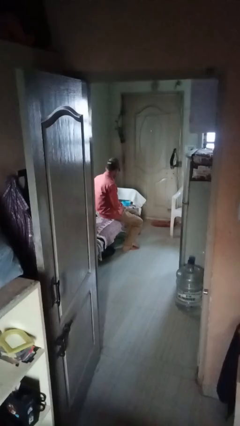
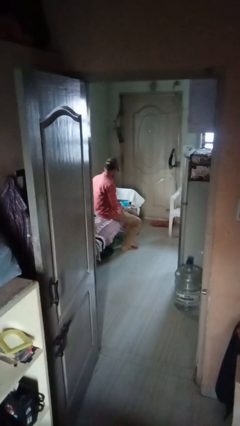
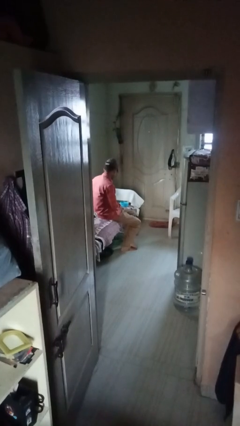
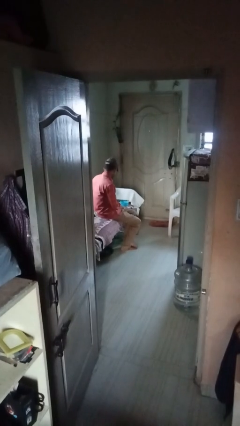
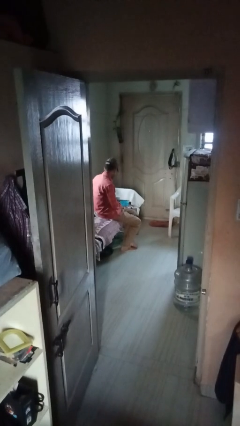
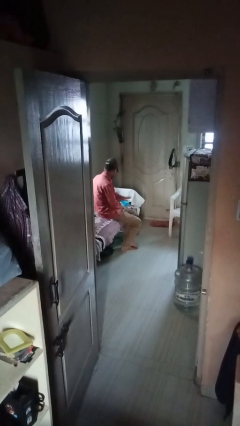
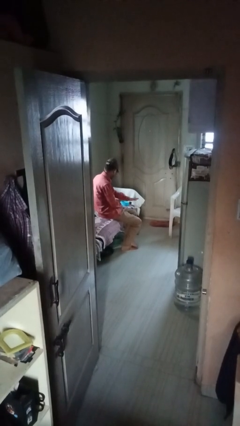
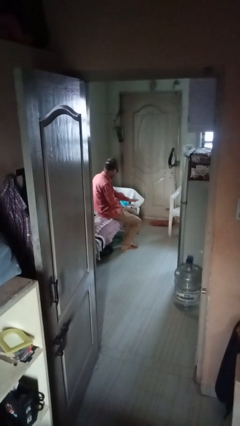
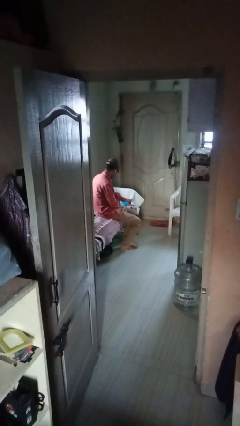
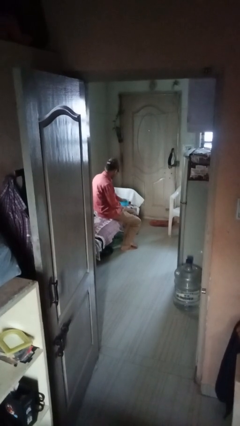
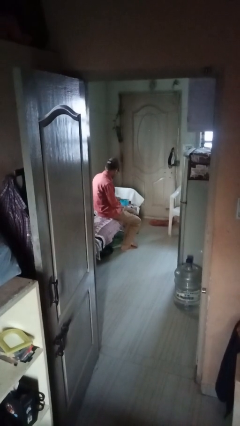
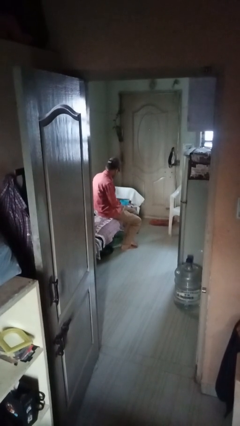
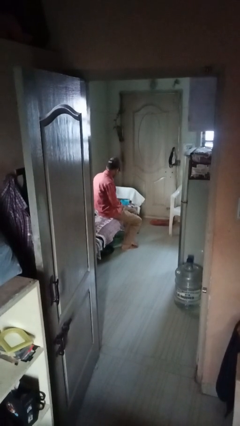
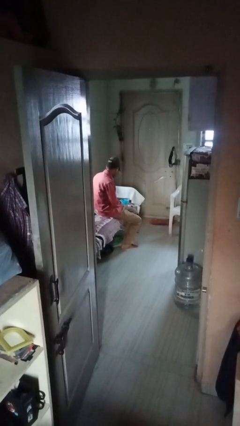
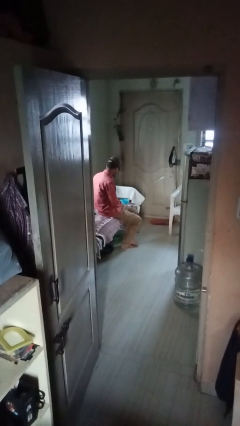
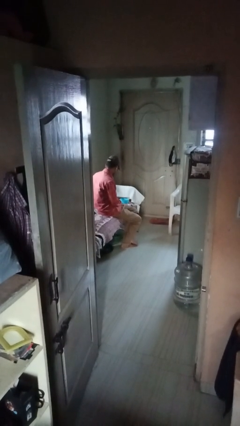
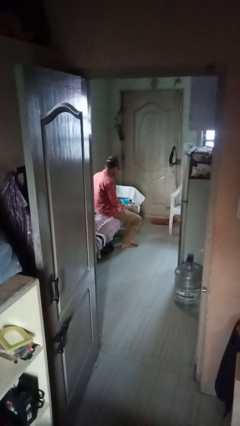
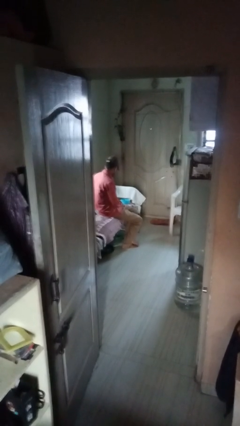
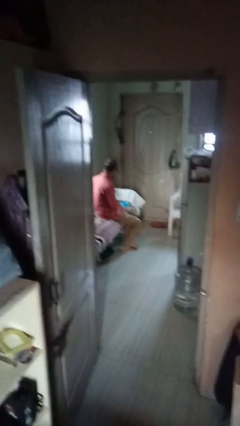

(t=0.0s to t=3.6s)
person waves hand over object

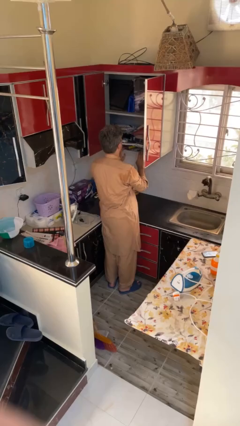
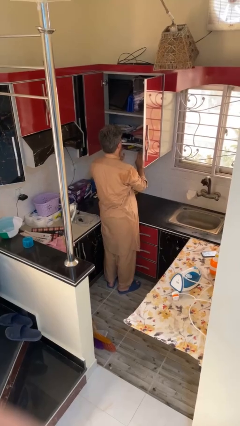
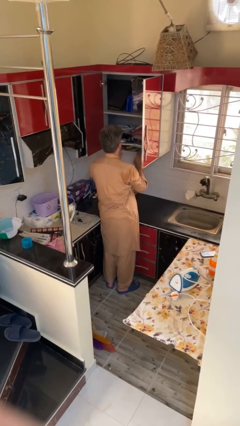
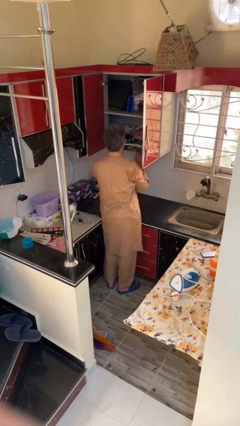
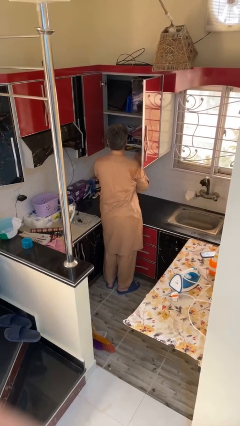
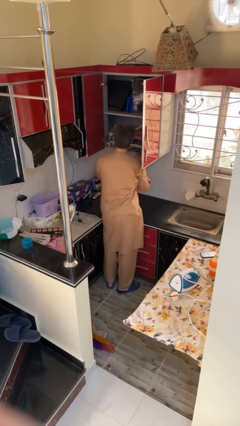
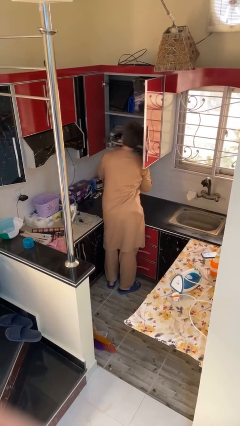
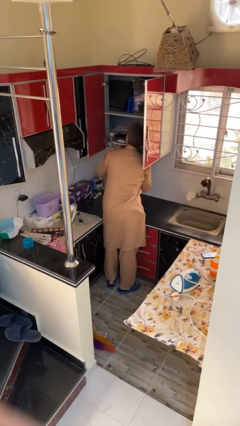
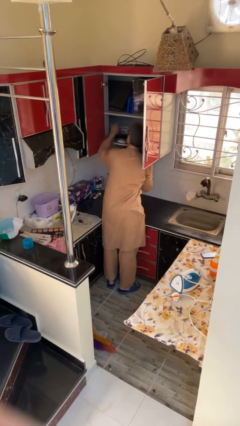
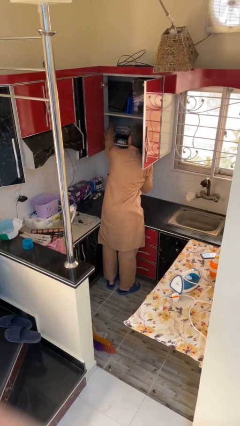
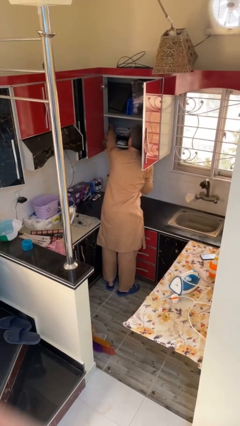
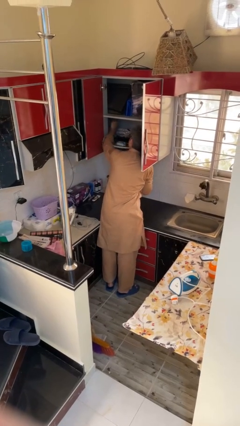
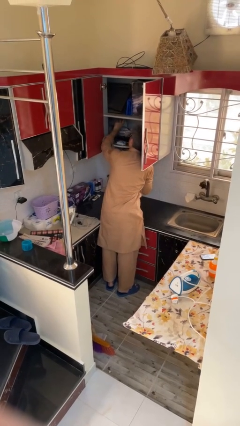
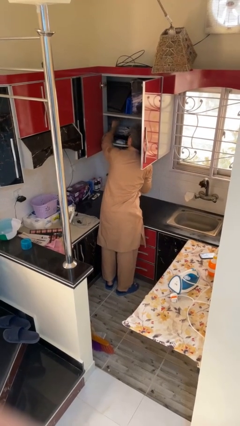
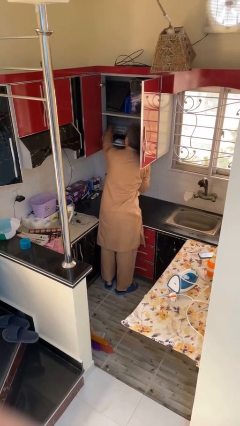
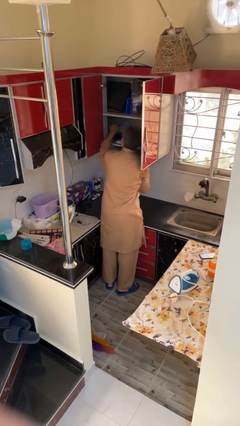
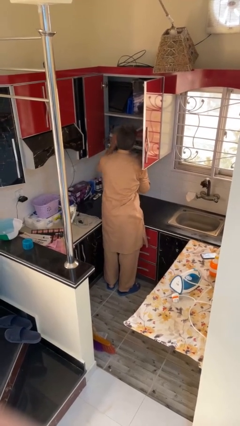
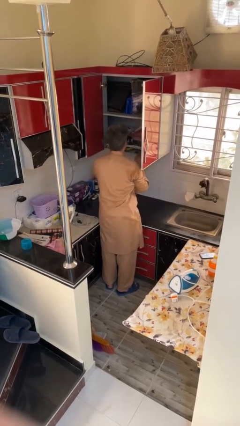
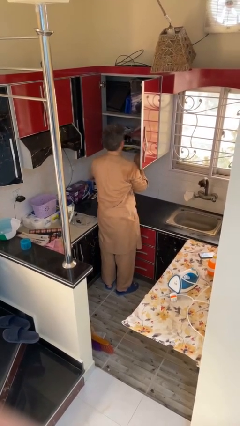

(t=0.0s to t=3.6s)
person searches in cabinet

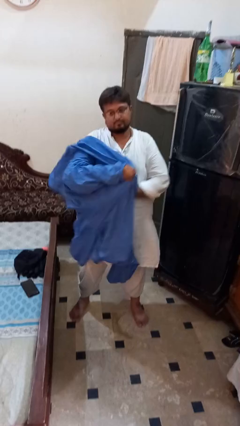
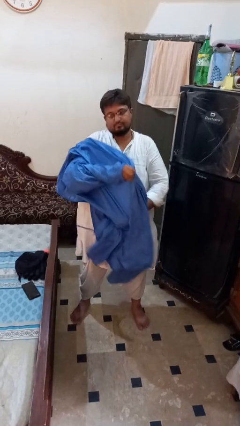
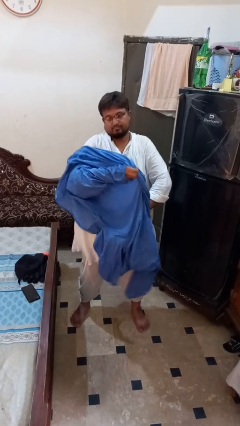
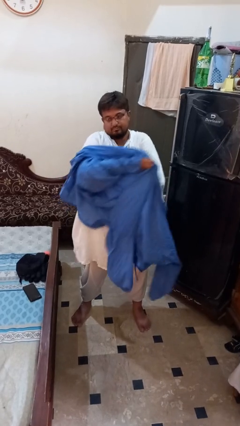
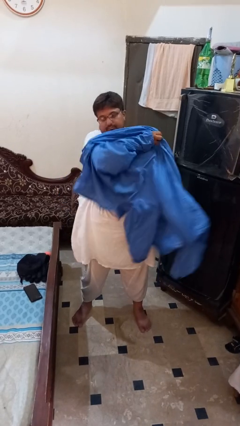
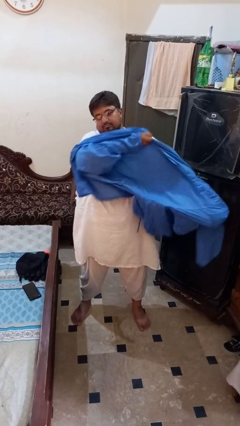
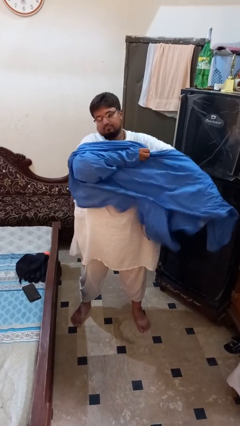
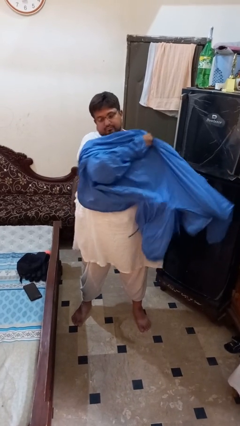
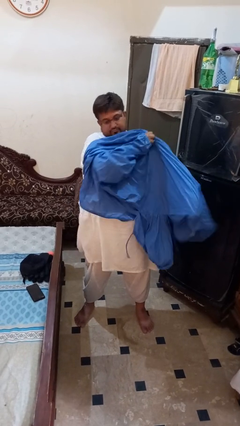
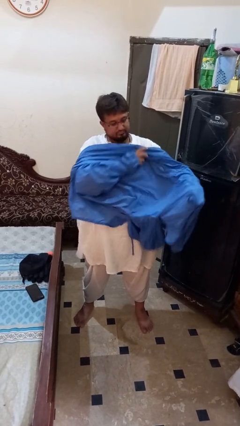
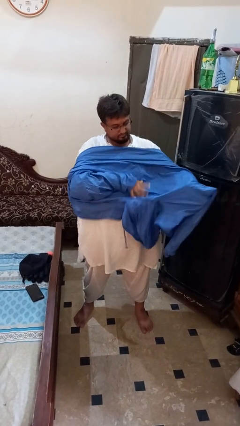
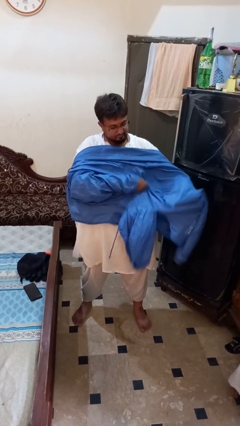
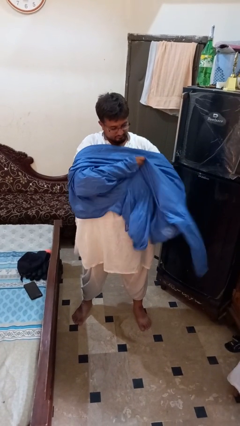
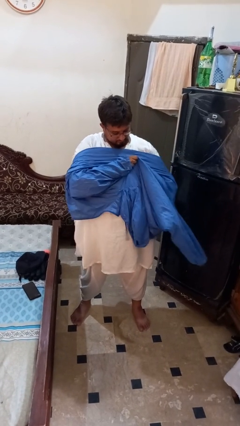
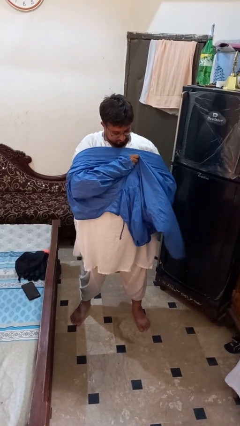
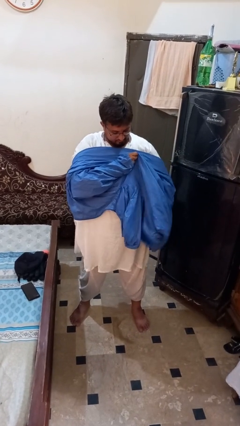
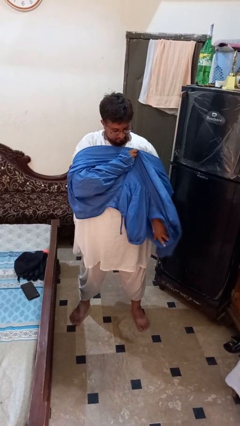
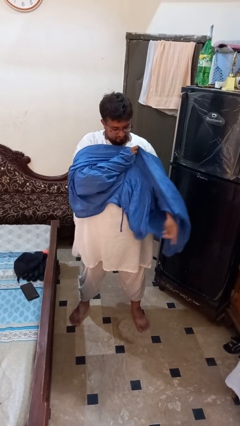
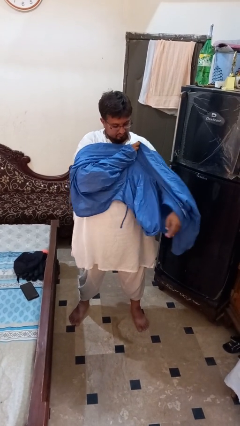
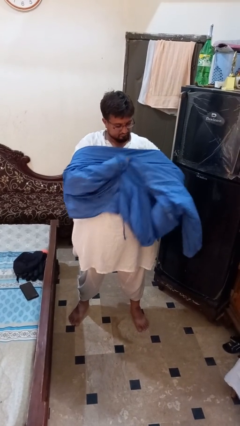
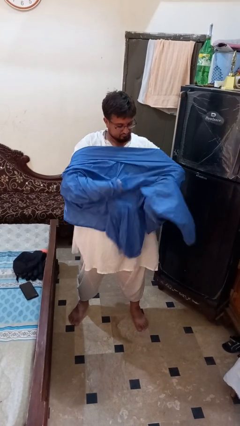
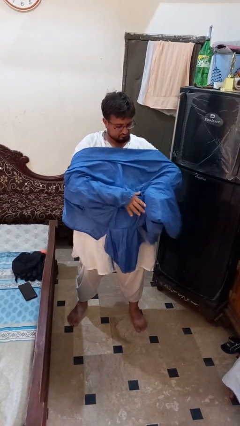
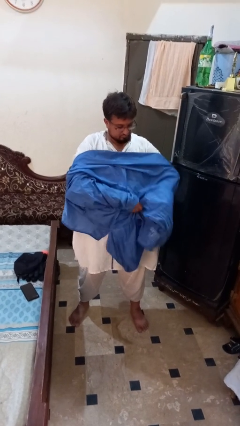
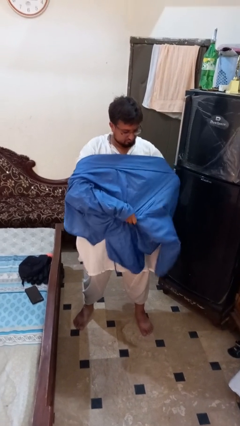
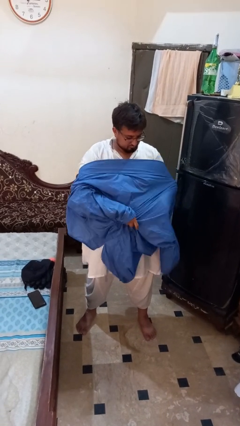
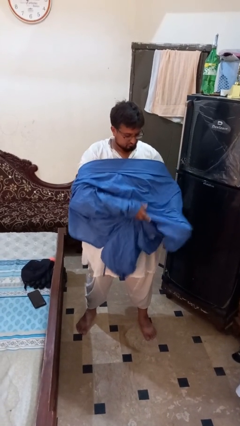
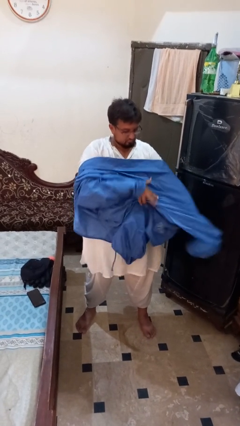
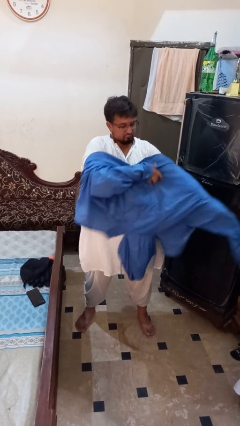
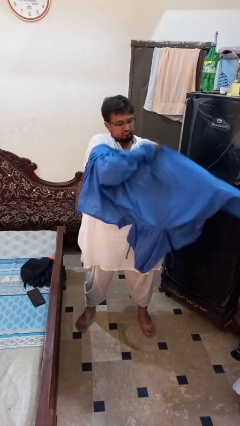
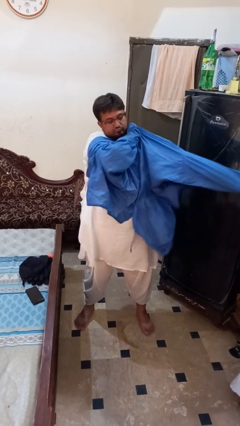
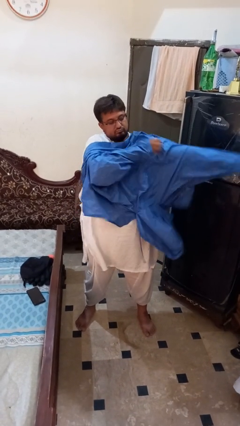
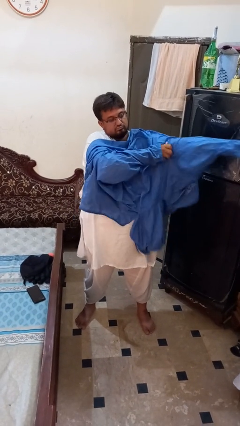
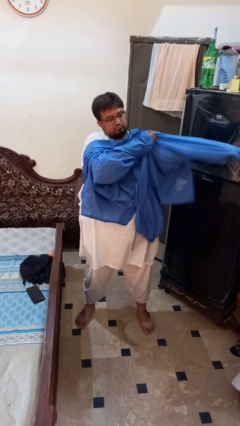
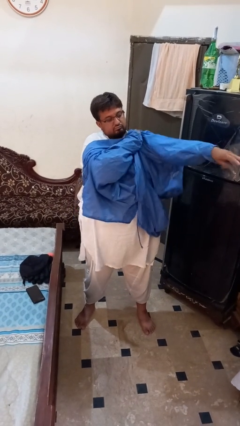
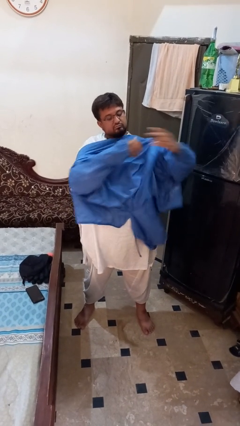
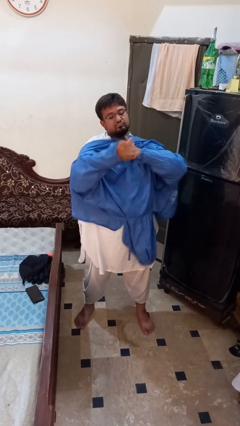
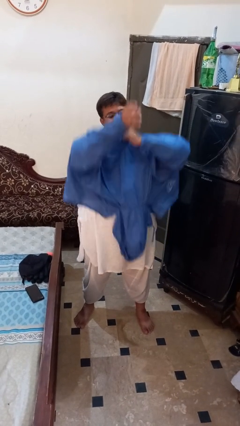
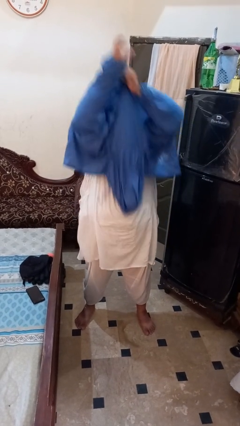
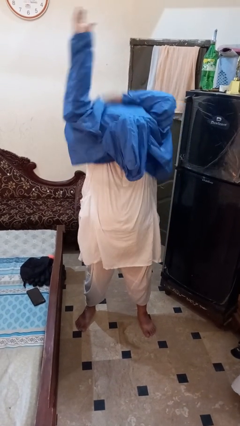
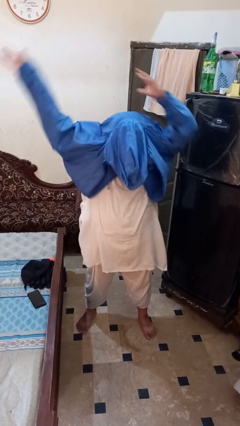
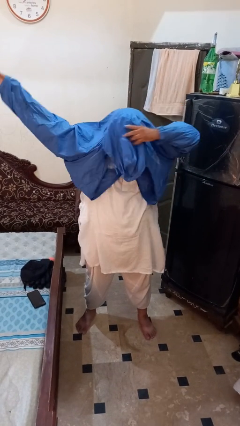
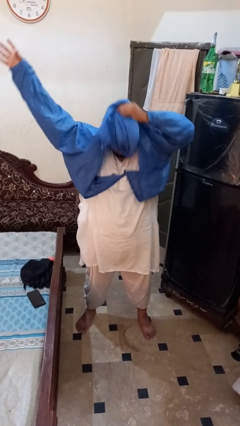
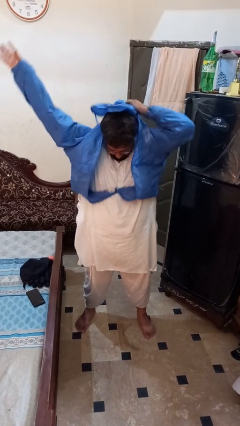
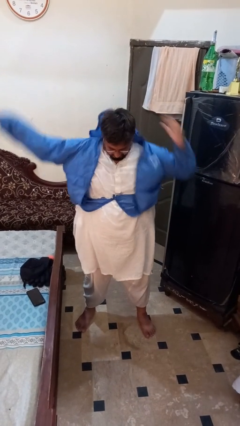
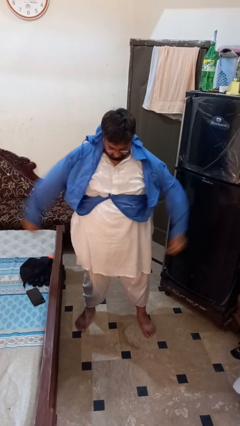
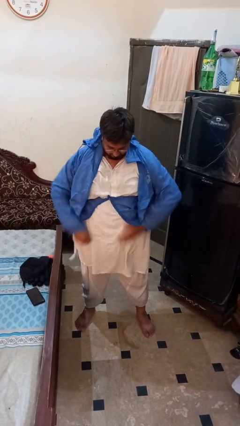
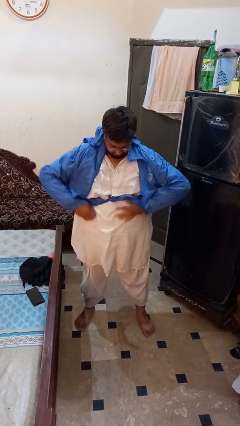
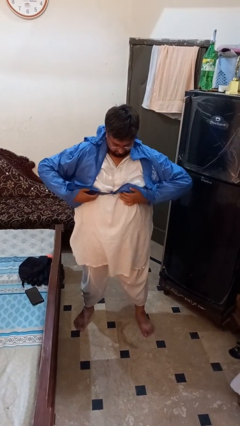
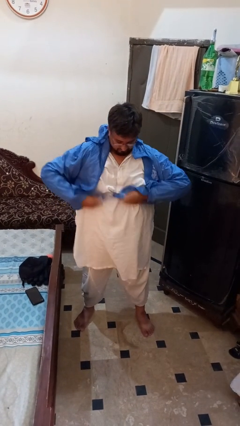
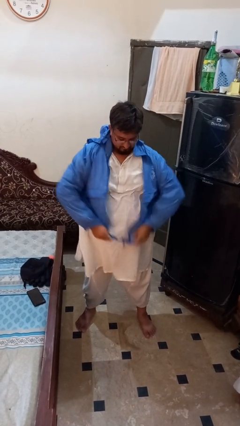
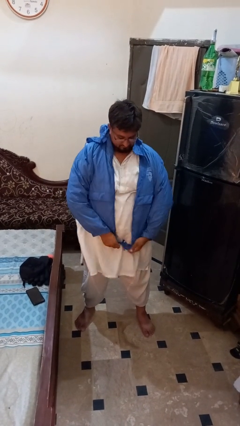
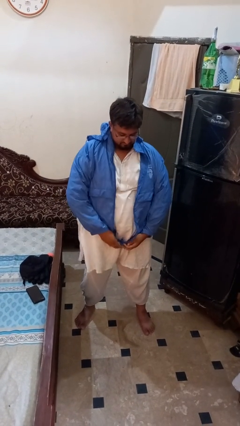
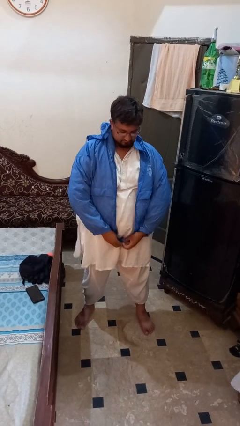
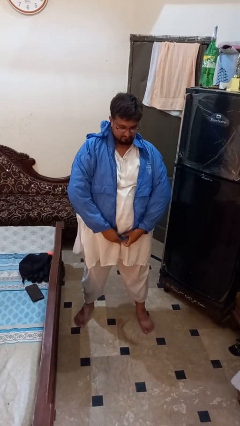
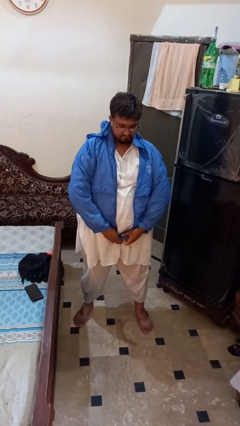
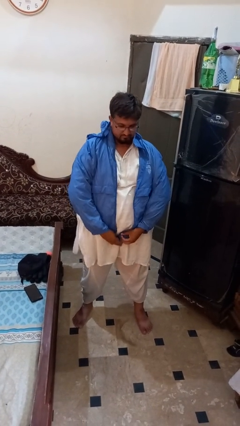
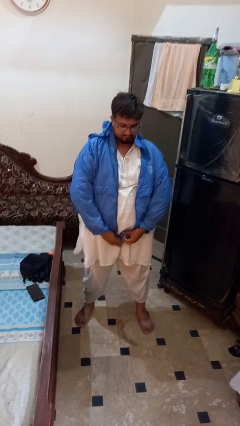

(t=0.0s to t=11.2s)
person puts on jacket
